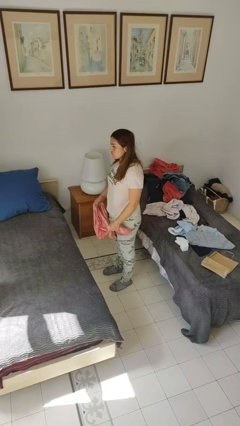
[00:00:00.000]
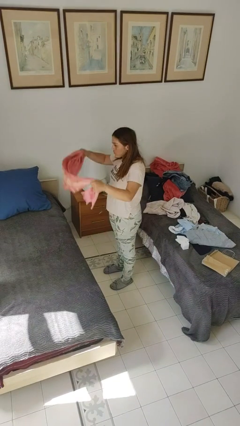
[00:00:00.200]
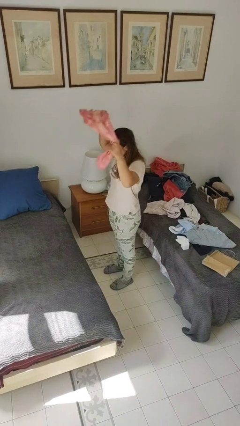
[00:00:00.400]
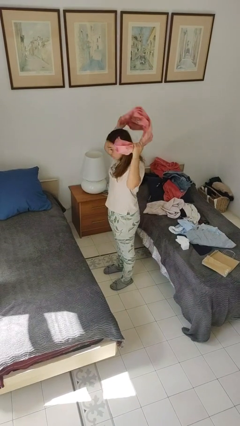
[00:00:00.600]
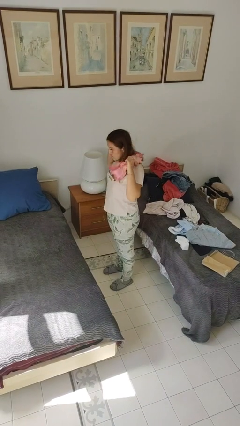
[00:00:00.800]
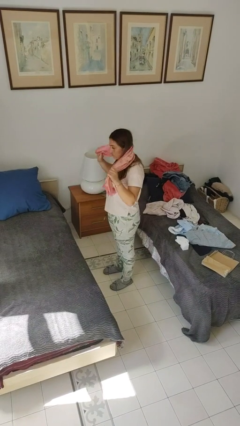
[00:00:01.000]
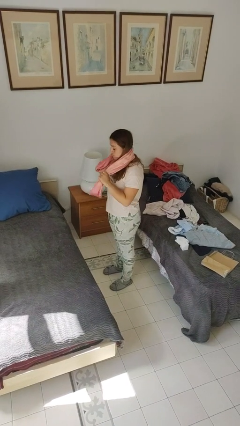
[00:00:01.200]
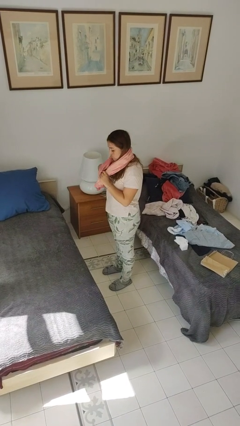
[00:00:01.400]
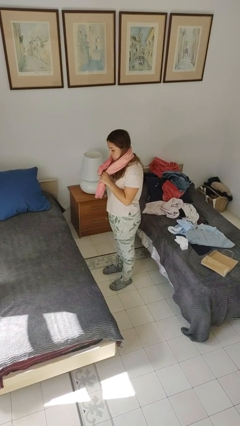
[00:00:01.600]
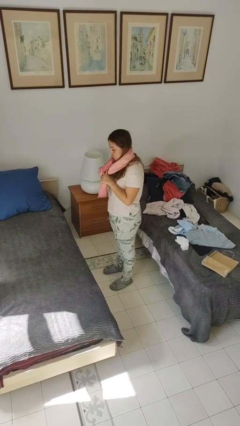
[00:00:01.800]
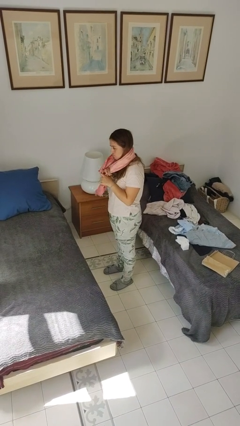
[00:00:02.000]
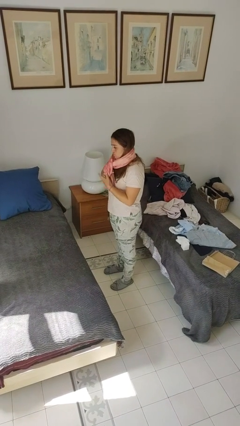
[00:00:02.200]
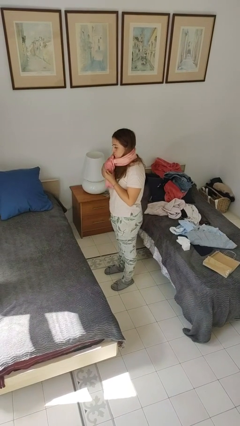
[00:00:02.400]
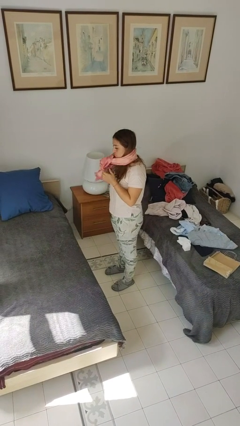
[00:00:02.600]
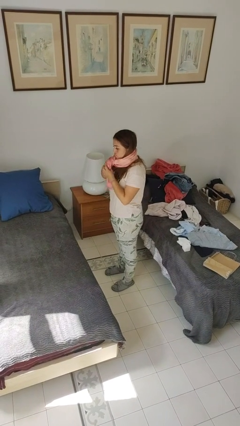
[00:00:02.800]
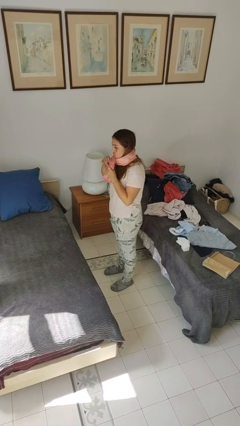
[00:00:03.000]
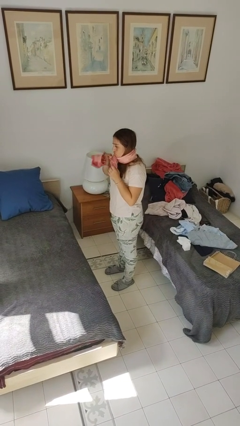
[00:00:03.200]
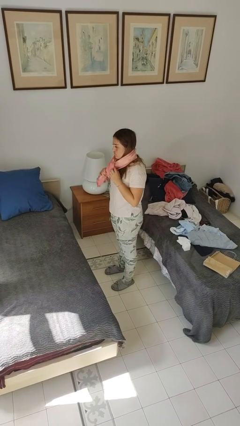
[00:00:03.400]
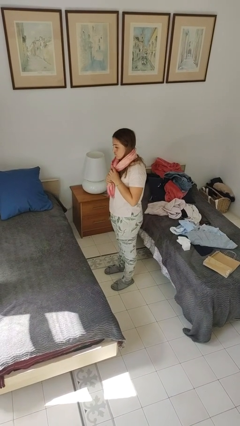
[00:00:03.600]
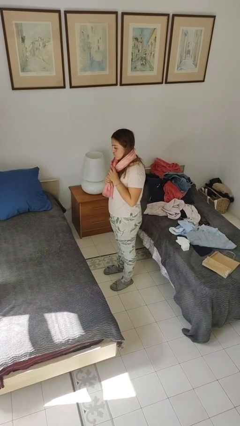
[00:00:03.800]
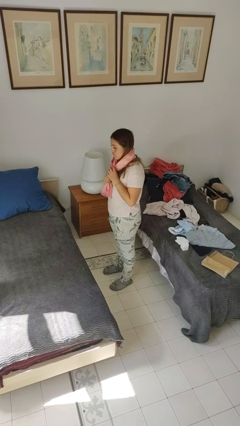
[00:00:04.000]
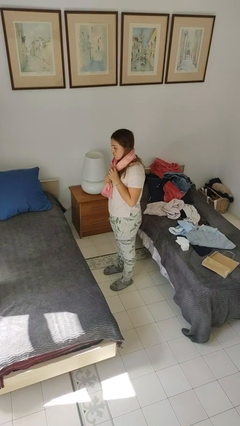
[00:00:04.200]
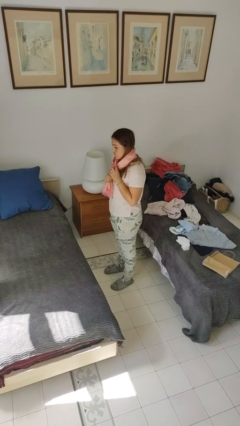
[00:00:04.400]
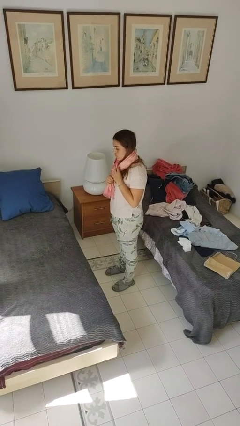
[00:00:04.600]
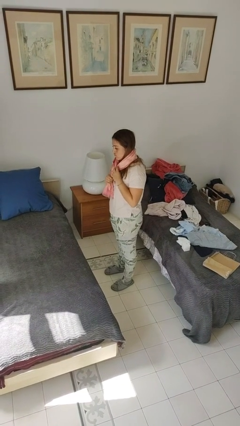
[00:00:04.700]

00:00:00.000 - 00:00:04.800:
person puts on necktie

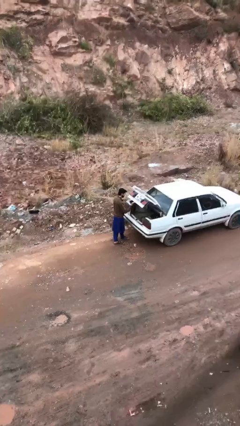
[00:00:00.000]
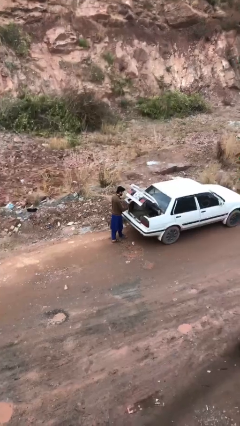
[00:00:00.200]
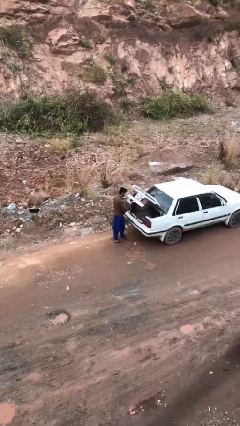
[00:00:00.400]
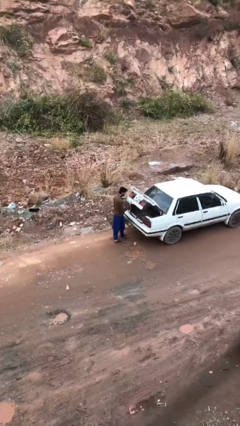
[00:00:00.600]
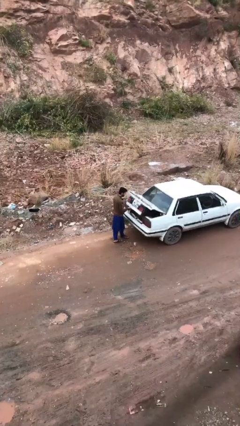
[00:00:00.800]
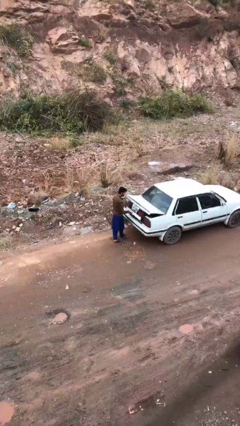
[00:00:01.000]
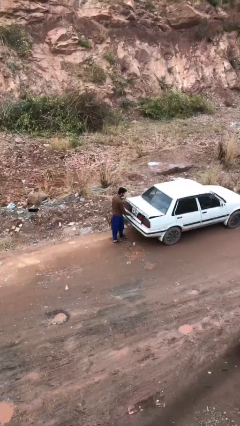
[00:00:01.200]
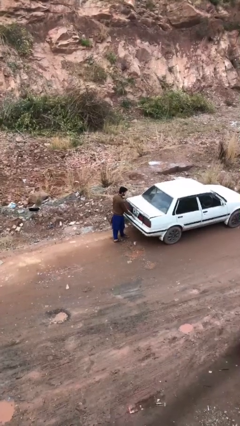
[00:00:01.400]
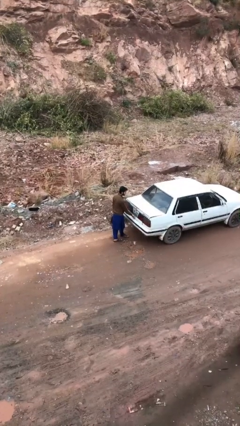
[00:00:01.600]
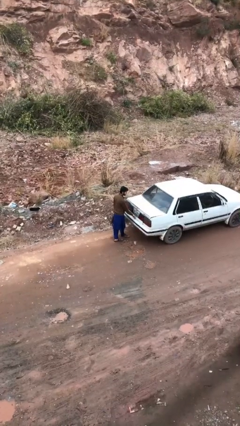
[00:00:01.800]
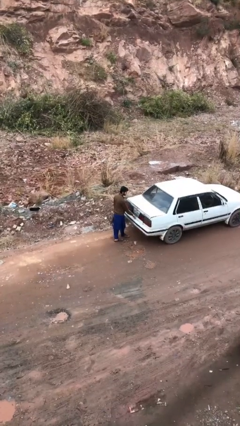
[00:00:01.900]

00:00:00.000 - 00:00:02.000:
person closes car trunk

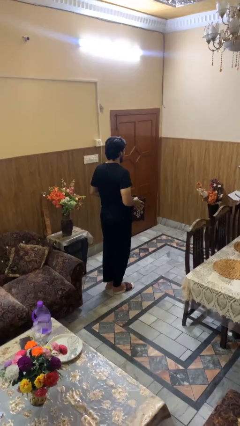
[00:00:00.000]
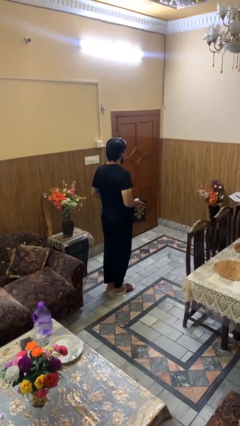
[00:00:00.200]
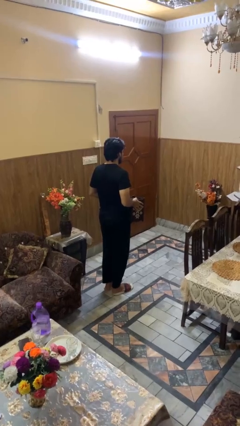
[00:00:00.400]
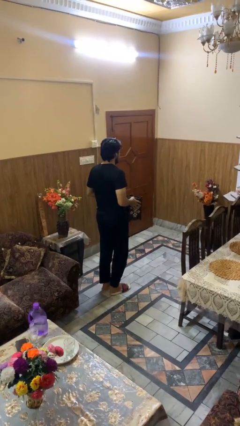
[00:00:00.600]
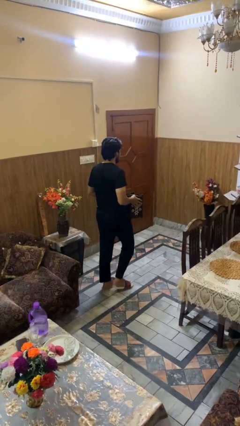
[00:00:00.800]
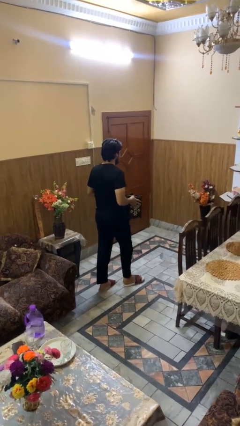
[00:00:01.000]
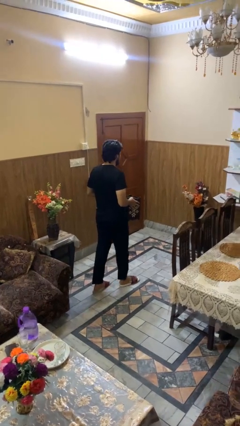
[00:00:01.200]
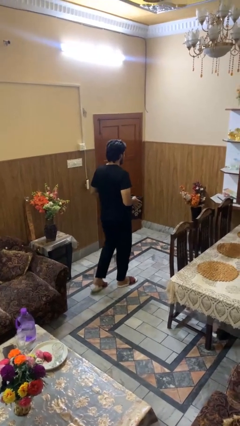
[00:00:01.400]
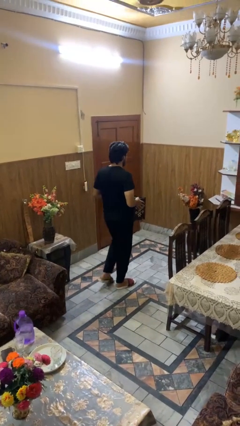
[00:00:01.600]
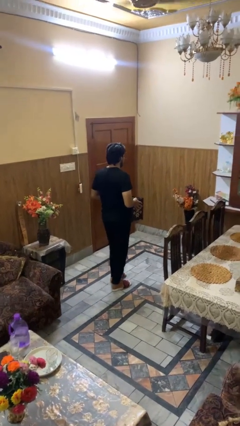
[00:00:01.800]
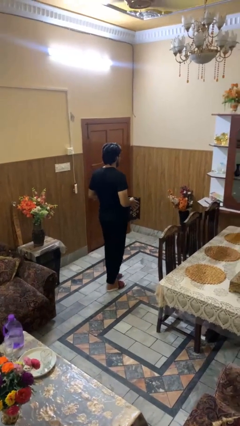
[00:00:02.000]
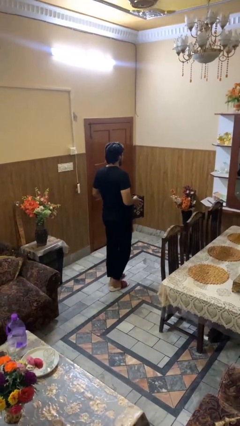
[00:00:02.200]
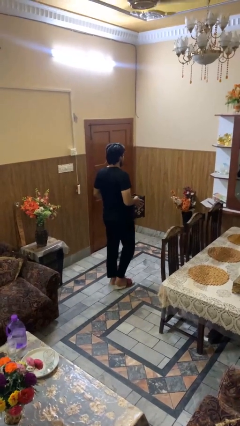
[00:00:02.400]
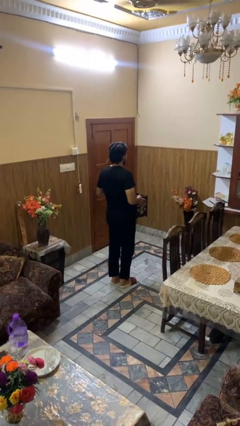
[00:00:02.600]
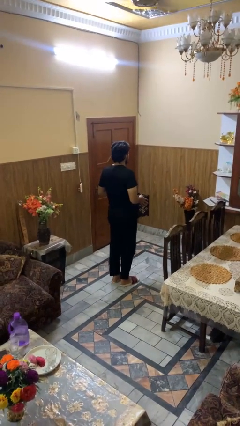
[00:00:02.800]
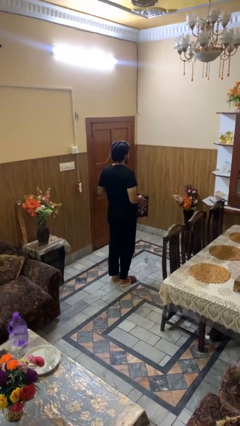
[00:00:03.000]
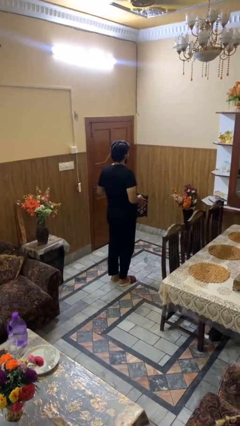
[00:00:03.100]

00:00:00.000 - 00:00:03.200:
person carries groceries

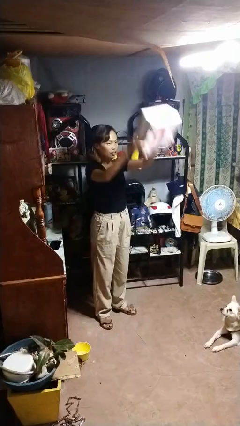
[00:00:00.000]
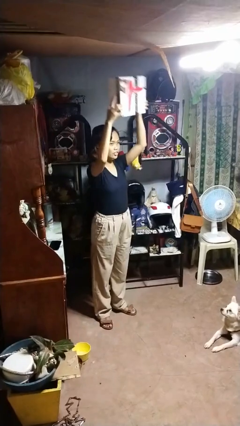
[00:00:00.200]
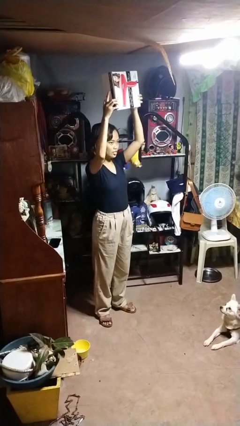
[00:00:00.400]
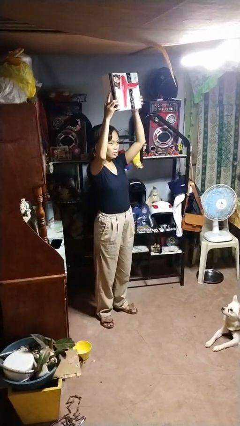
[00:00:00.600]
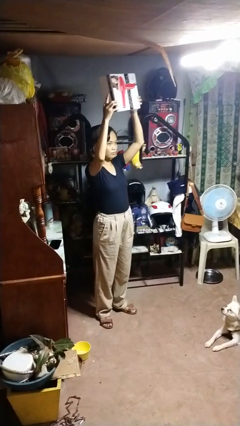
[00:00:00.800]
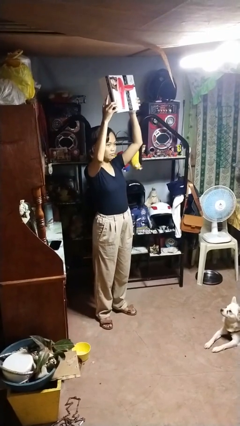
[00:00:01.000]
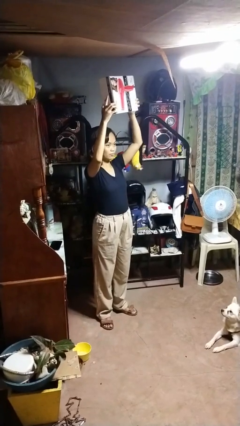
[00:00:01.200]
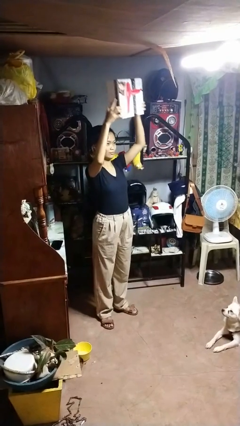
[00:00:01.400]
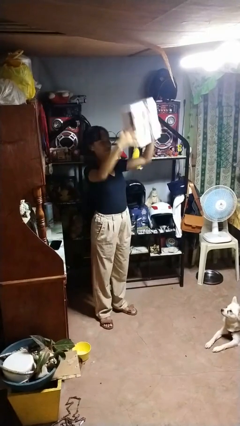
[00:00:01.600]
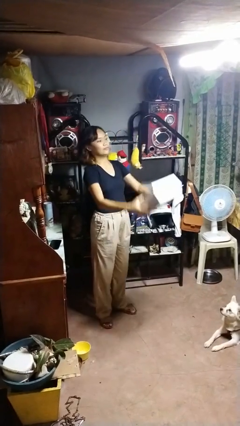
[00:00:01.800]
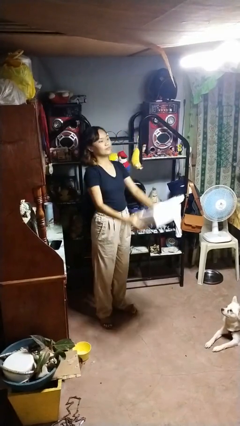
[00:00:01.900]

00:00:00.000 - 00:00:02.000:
person holds object above head

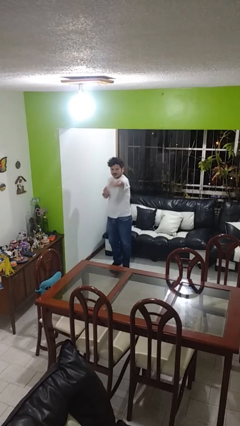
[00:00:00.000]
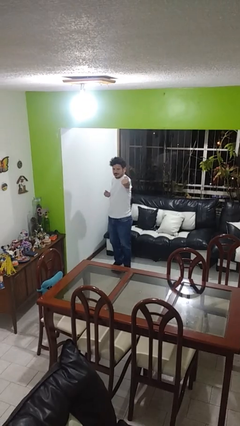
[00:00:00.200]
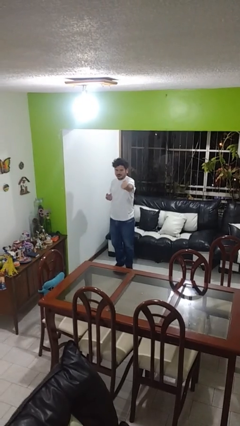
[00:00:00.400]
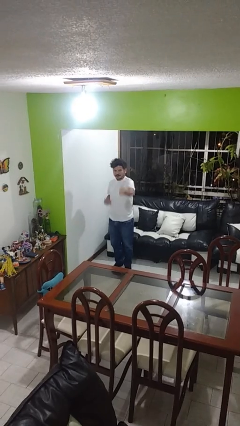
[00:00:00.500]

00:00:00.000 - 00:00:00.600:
person karate chop

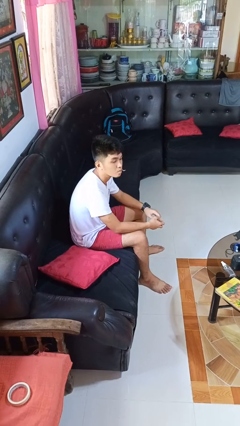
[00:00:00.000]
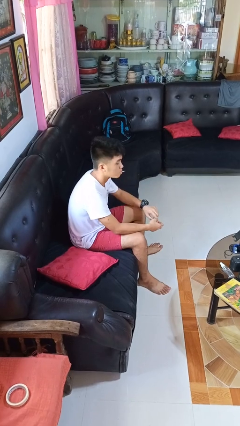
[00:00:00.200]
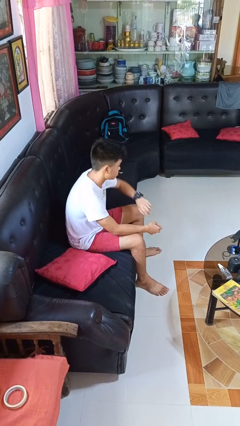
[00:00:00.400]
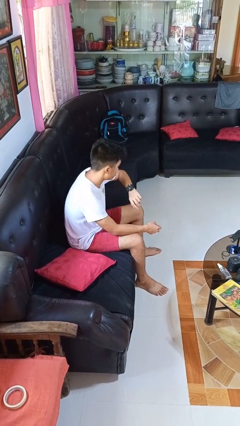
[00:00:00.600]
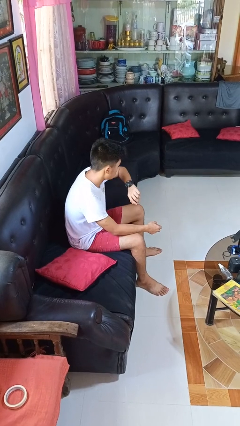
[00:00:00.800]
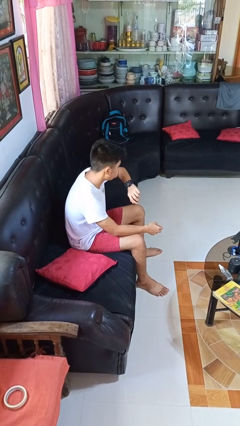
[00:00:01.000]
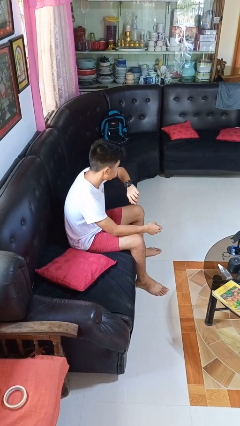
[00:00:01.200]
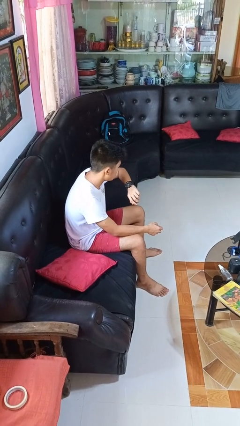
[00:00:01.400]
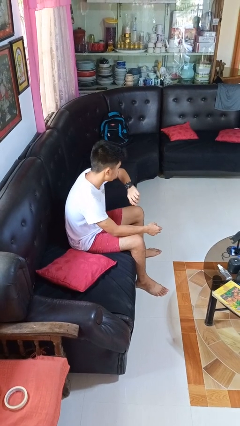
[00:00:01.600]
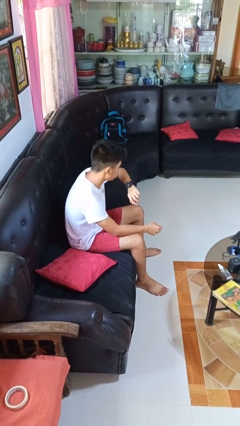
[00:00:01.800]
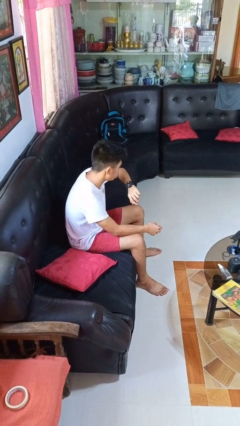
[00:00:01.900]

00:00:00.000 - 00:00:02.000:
person looks at wristwatch

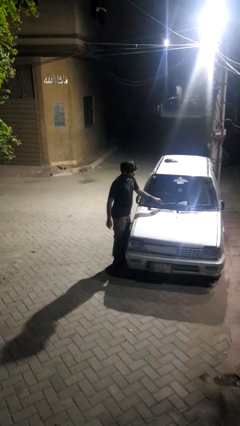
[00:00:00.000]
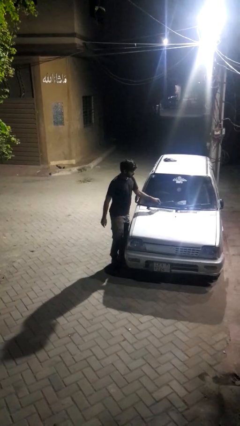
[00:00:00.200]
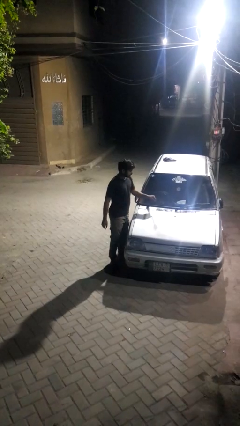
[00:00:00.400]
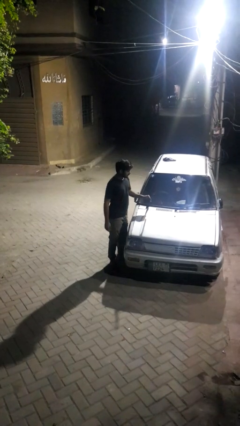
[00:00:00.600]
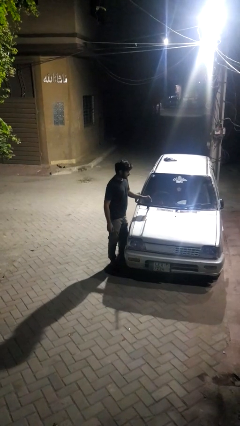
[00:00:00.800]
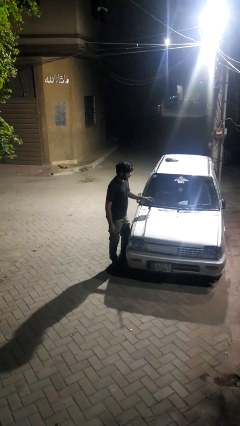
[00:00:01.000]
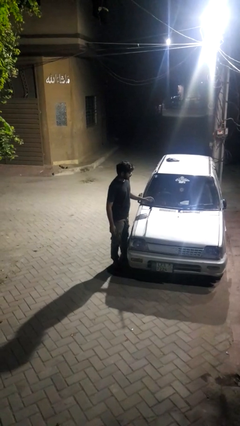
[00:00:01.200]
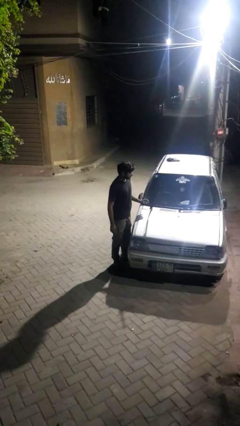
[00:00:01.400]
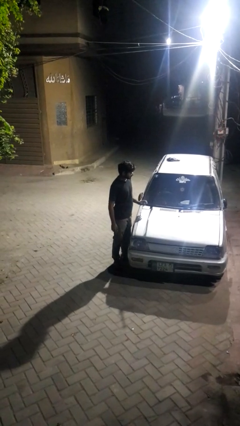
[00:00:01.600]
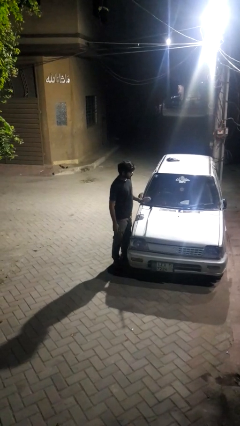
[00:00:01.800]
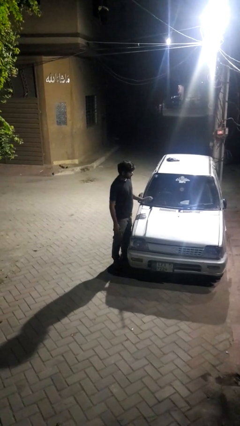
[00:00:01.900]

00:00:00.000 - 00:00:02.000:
person flips up car wipers

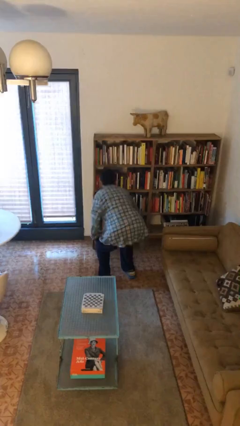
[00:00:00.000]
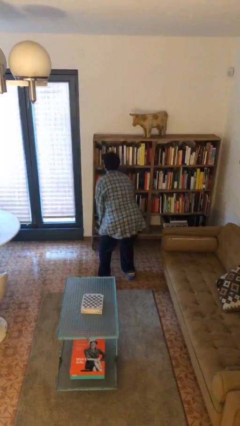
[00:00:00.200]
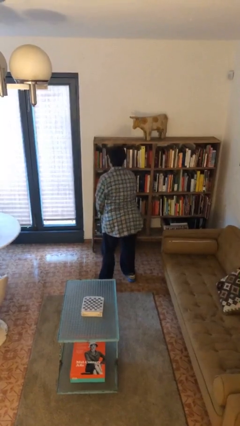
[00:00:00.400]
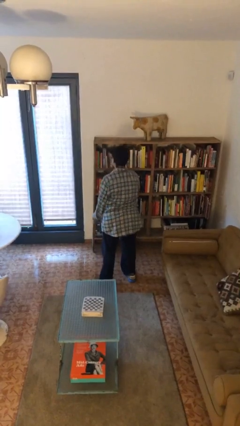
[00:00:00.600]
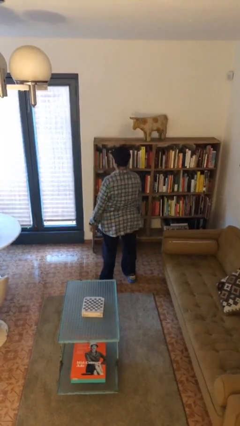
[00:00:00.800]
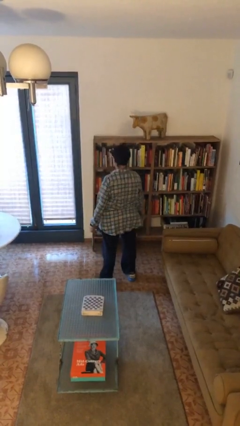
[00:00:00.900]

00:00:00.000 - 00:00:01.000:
person stands up
